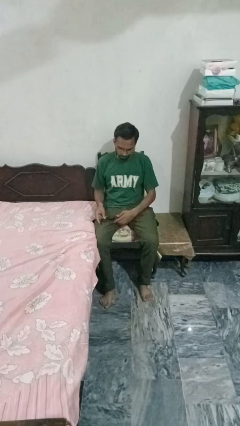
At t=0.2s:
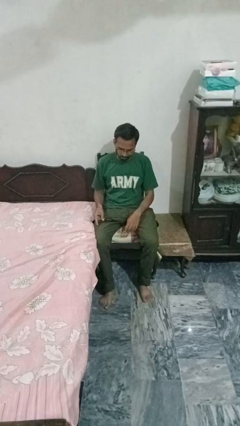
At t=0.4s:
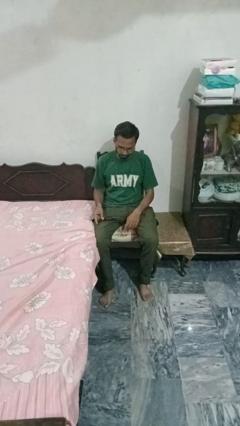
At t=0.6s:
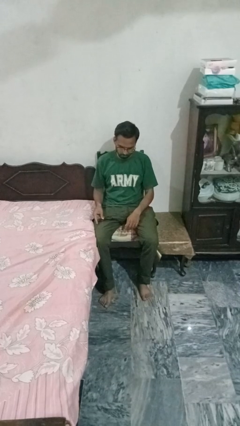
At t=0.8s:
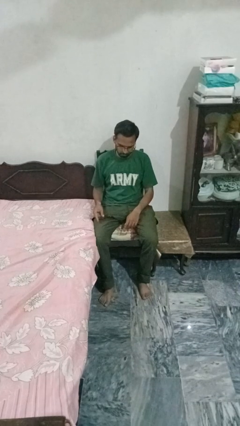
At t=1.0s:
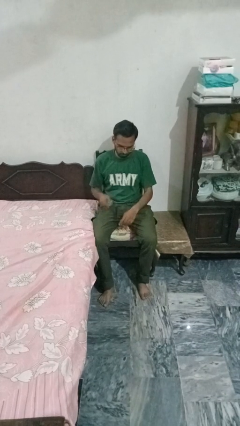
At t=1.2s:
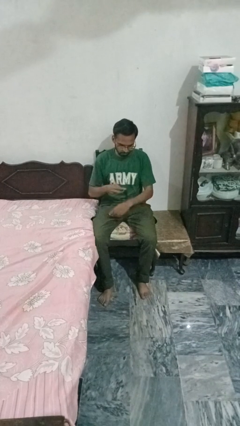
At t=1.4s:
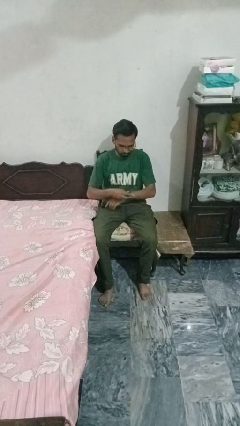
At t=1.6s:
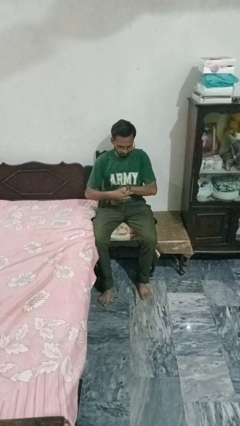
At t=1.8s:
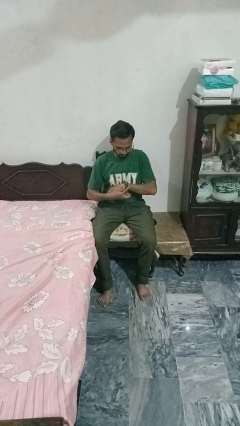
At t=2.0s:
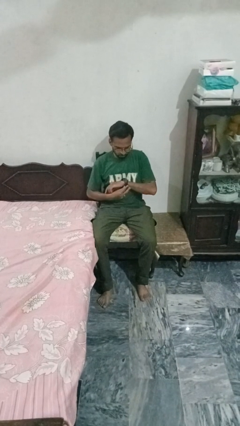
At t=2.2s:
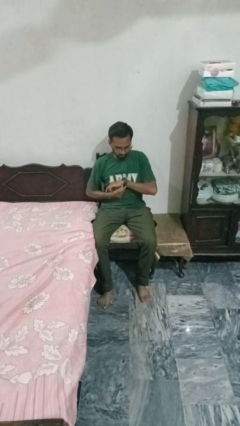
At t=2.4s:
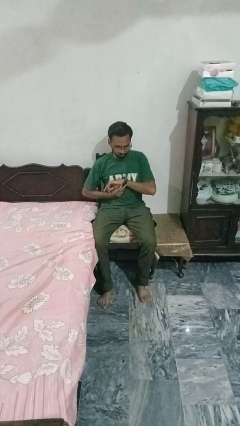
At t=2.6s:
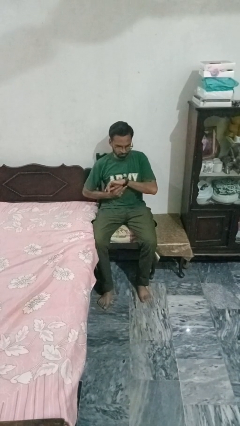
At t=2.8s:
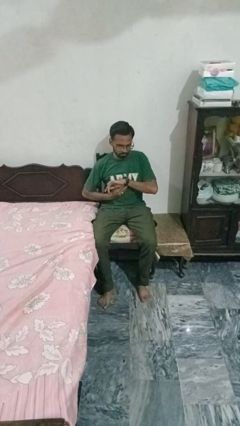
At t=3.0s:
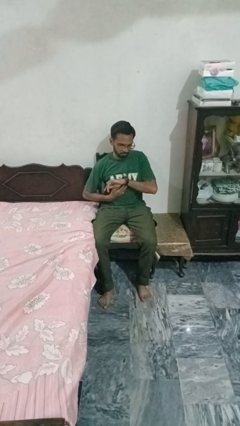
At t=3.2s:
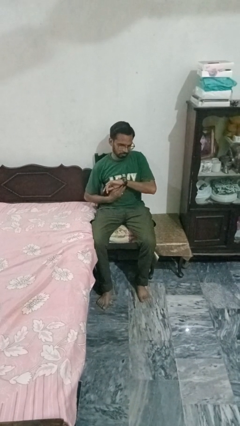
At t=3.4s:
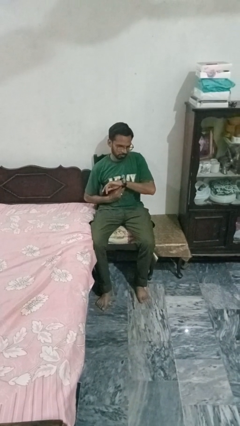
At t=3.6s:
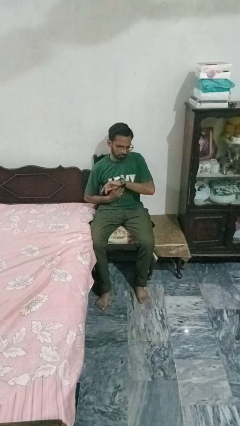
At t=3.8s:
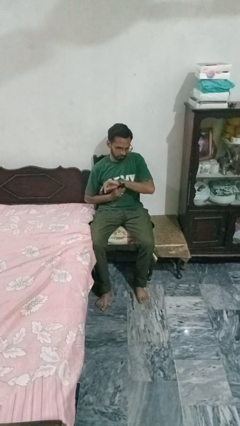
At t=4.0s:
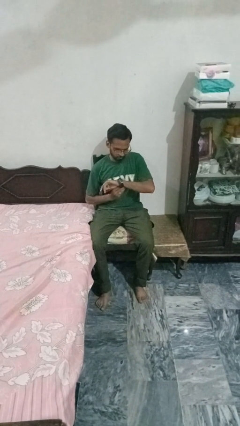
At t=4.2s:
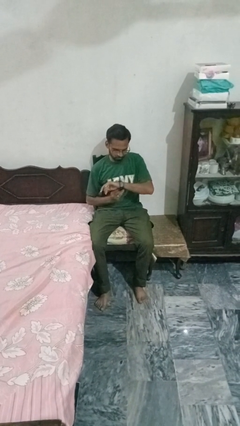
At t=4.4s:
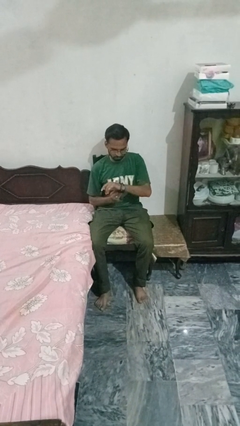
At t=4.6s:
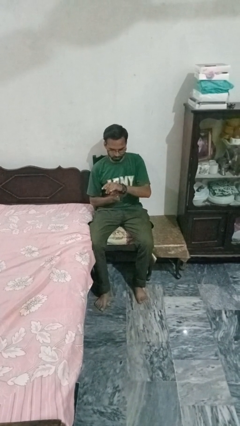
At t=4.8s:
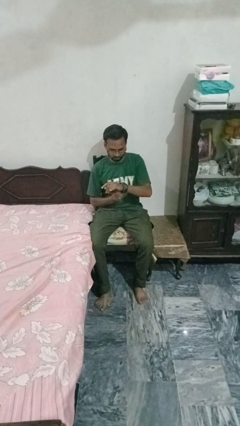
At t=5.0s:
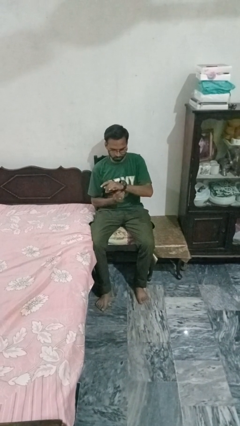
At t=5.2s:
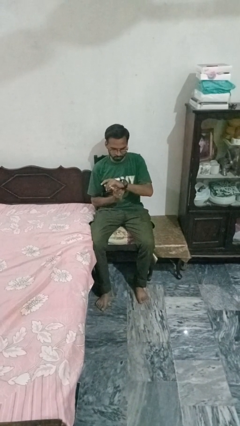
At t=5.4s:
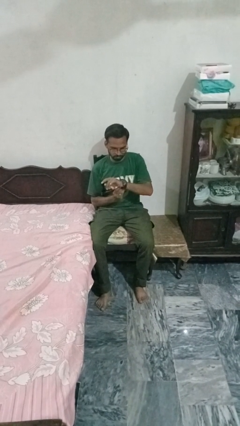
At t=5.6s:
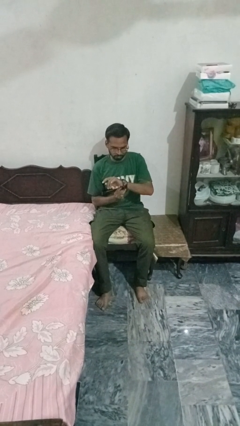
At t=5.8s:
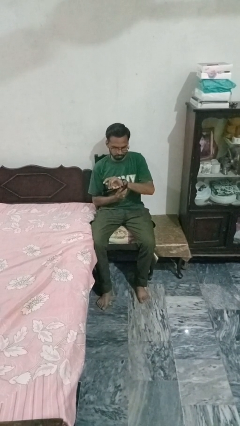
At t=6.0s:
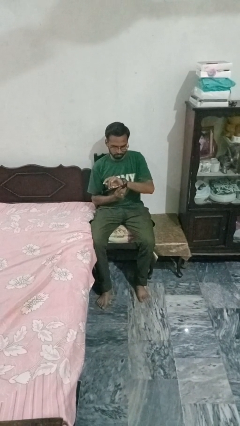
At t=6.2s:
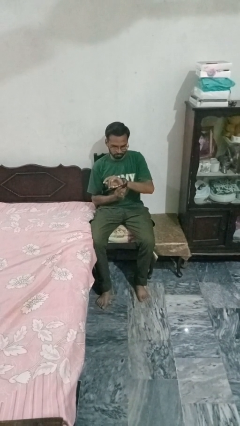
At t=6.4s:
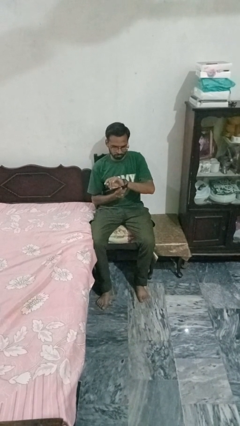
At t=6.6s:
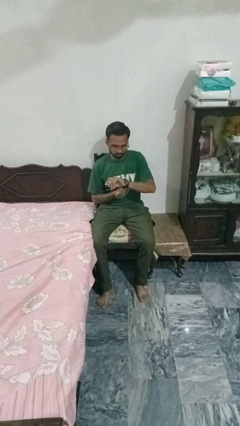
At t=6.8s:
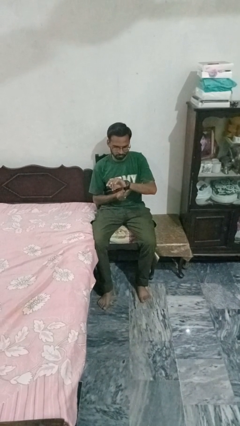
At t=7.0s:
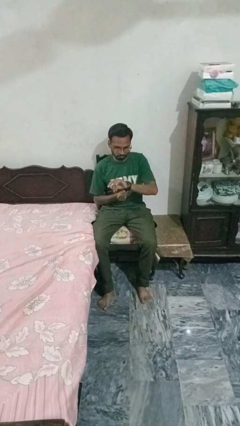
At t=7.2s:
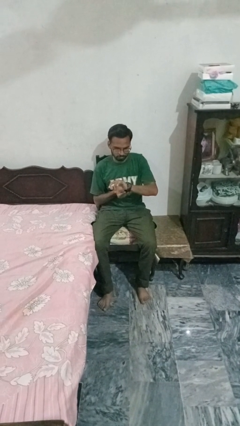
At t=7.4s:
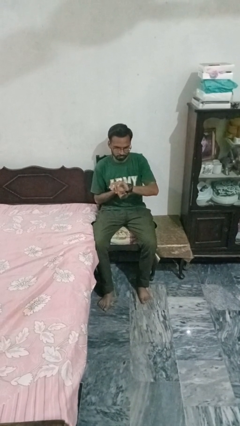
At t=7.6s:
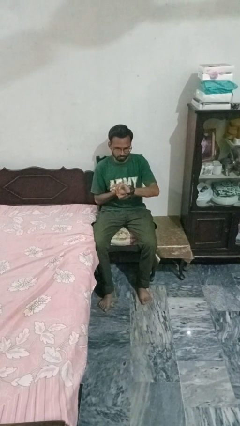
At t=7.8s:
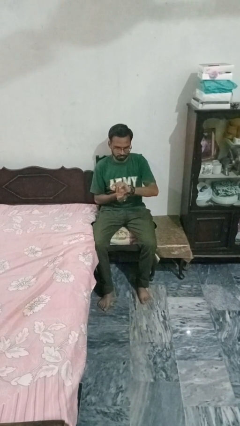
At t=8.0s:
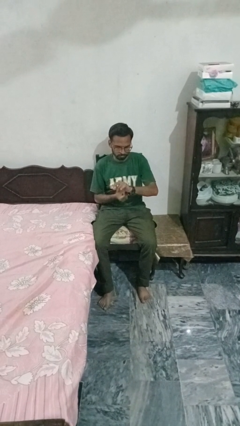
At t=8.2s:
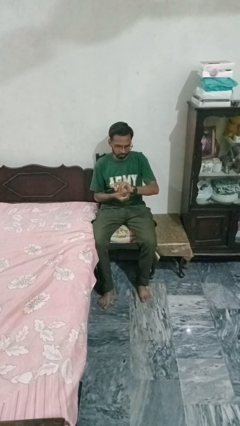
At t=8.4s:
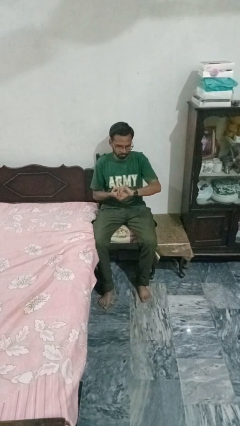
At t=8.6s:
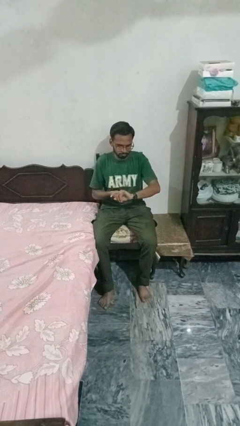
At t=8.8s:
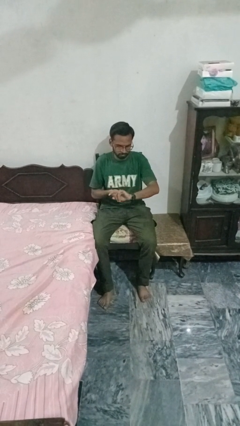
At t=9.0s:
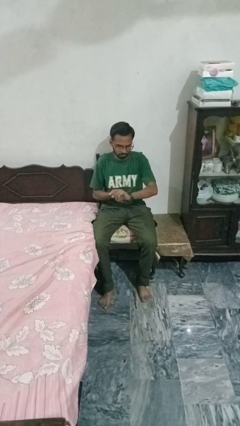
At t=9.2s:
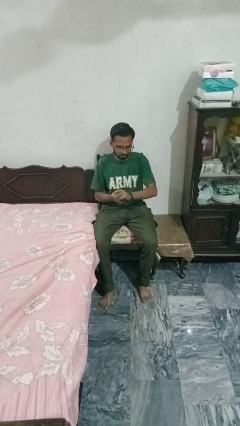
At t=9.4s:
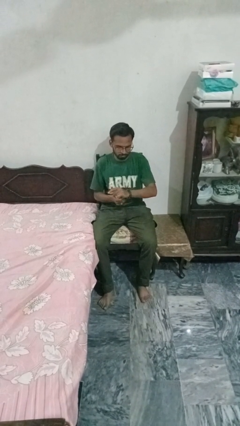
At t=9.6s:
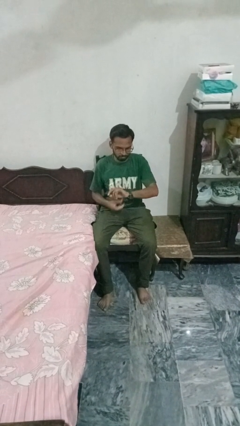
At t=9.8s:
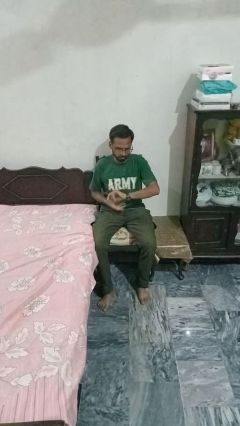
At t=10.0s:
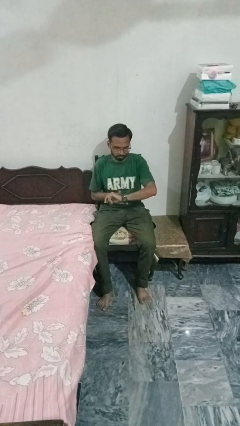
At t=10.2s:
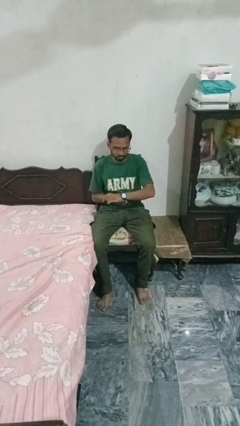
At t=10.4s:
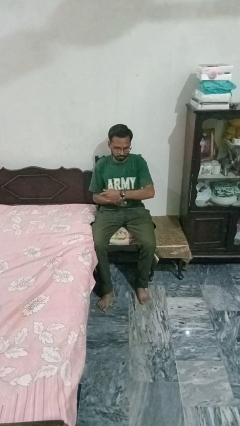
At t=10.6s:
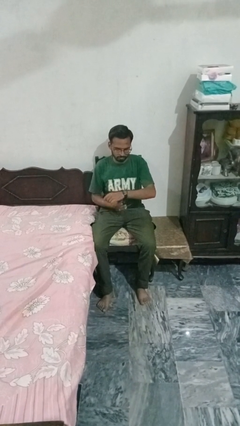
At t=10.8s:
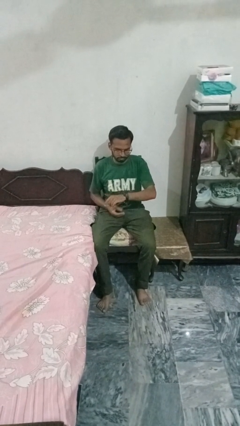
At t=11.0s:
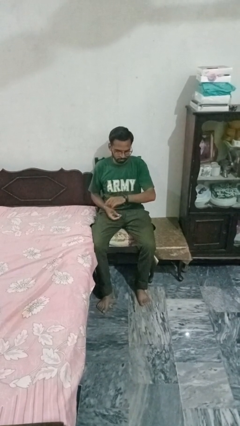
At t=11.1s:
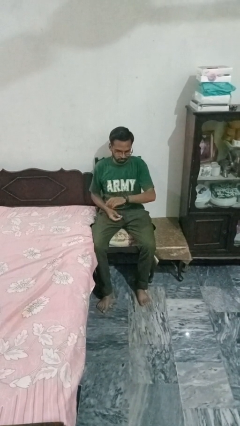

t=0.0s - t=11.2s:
person puts on wristwatch

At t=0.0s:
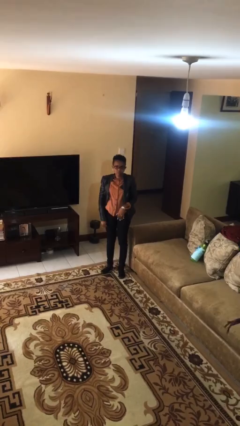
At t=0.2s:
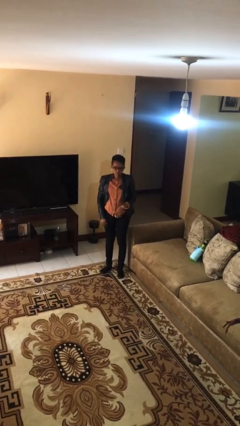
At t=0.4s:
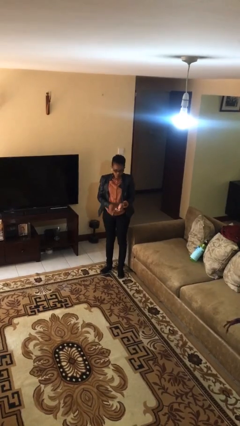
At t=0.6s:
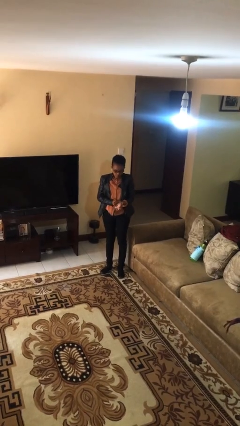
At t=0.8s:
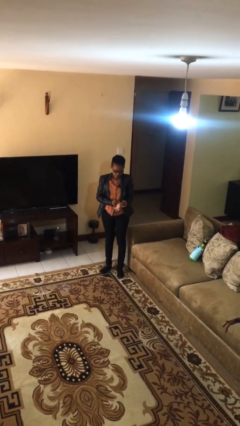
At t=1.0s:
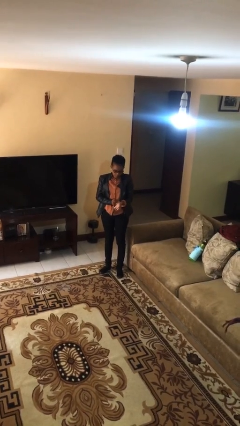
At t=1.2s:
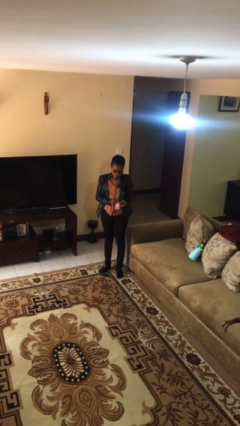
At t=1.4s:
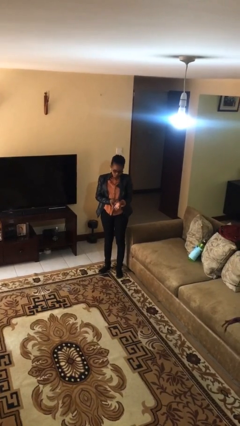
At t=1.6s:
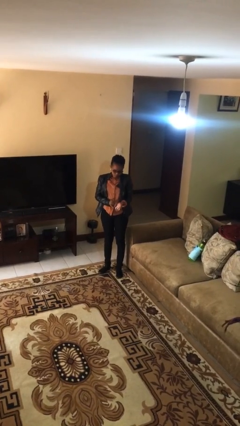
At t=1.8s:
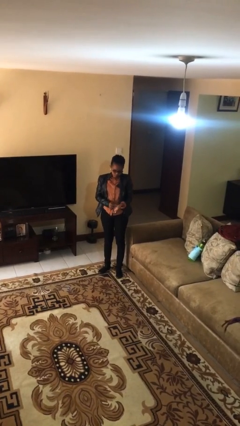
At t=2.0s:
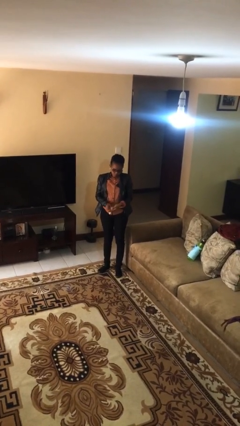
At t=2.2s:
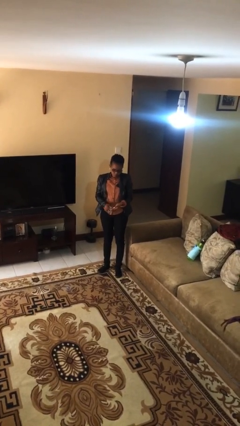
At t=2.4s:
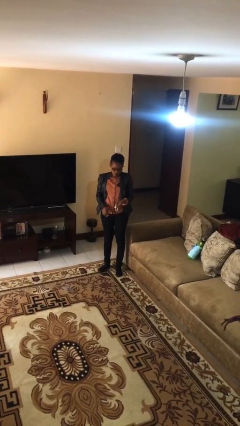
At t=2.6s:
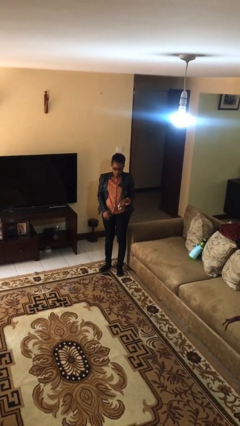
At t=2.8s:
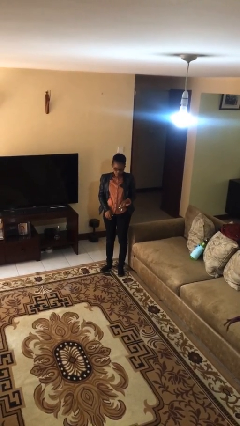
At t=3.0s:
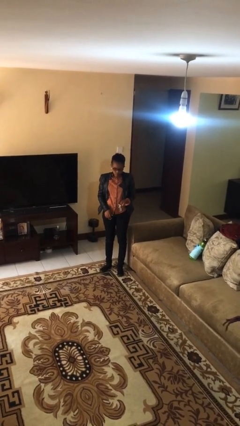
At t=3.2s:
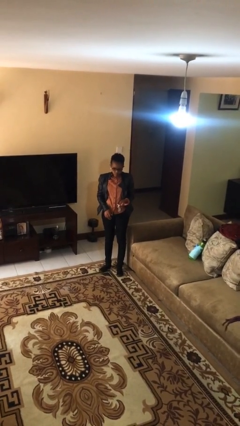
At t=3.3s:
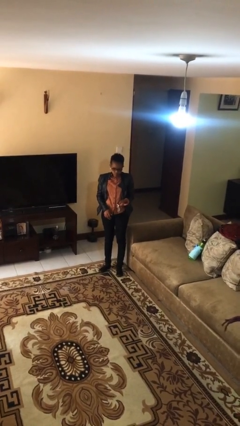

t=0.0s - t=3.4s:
person takes off wristwatch

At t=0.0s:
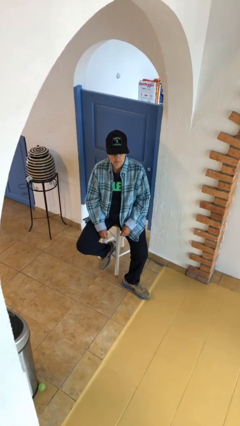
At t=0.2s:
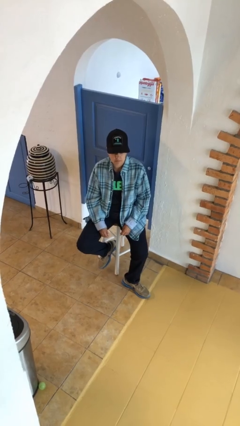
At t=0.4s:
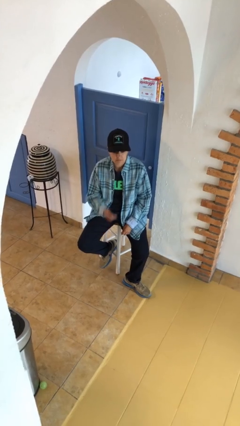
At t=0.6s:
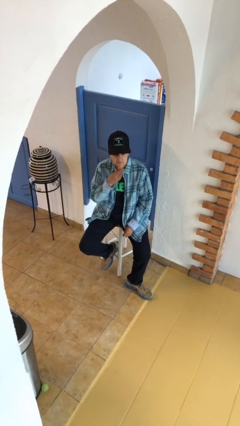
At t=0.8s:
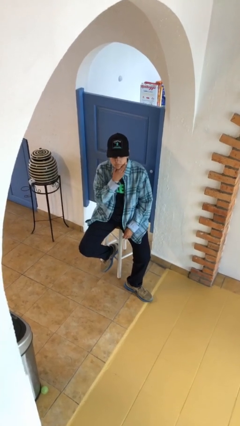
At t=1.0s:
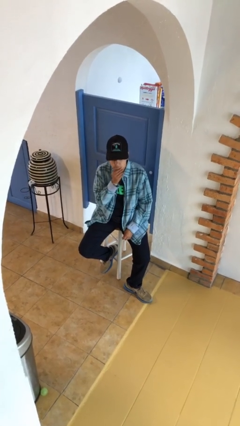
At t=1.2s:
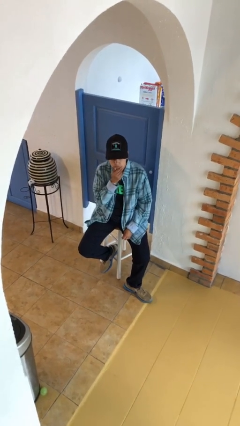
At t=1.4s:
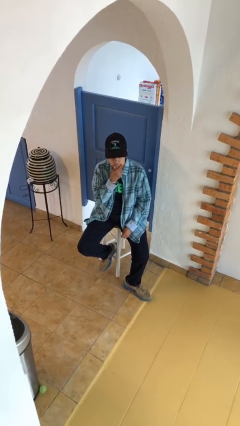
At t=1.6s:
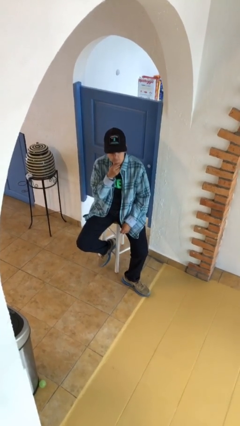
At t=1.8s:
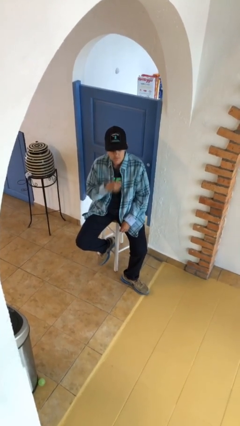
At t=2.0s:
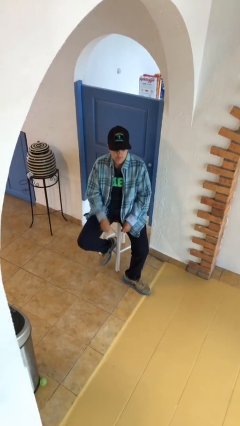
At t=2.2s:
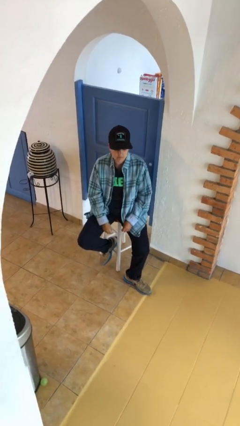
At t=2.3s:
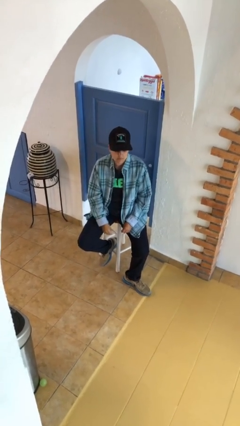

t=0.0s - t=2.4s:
person strokes chin

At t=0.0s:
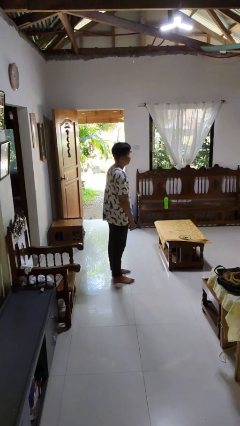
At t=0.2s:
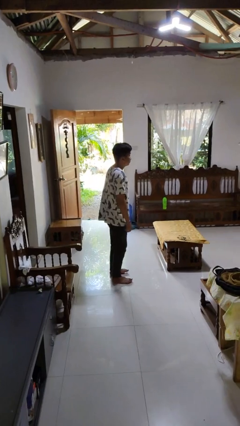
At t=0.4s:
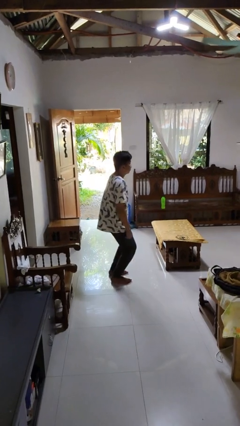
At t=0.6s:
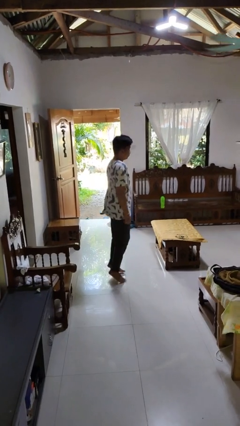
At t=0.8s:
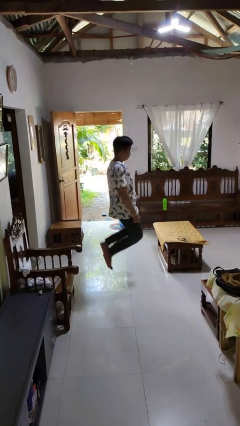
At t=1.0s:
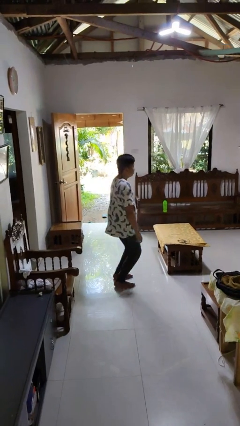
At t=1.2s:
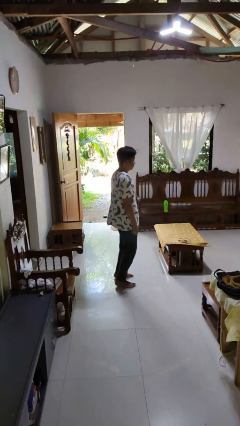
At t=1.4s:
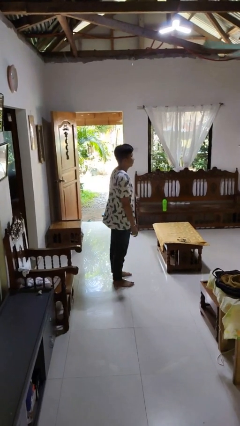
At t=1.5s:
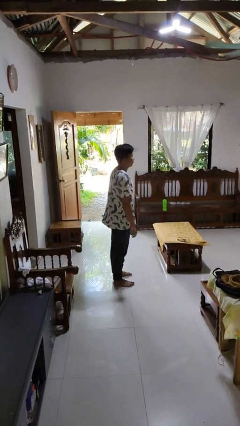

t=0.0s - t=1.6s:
person jumps
